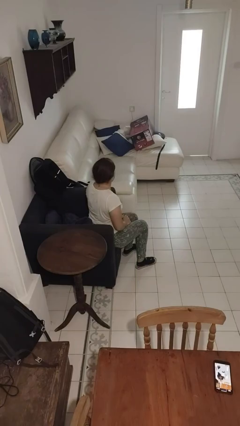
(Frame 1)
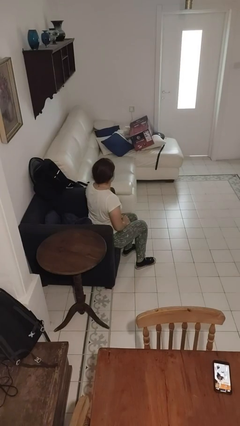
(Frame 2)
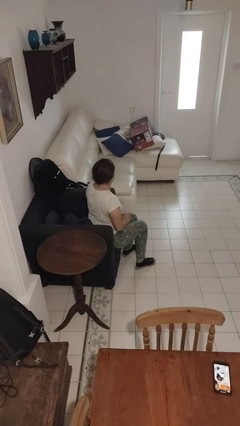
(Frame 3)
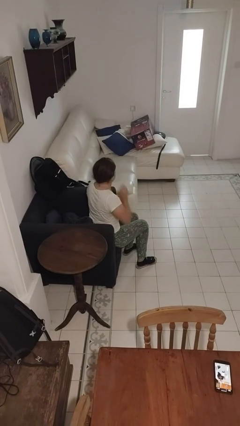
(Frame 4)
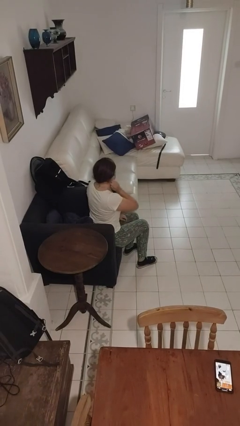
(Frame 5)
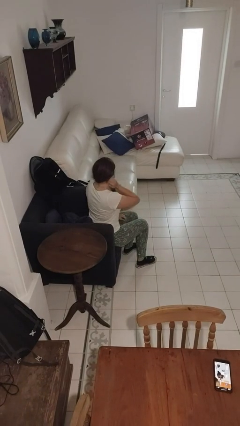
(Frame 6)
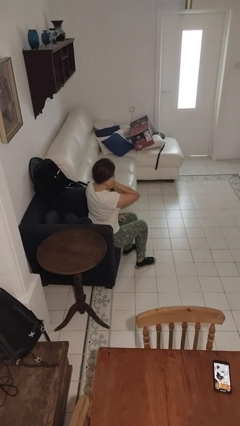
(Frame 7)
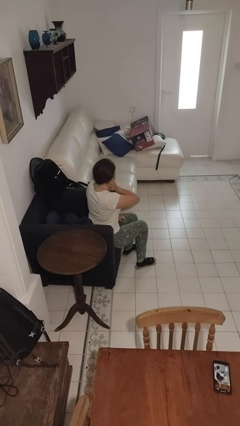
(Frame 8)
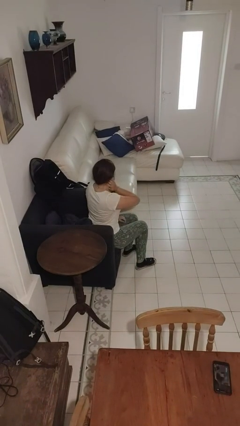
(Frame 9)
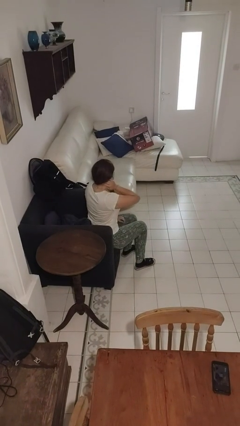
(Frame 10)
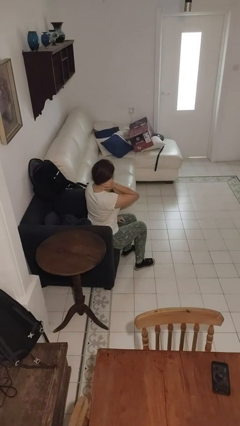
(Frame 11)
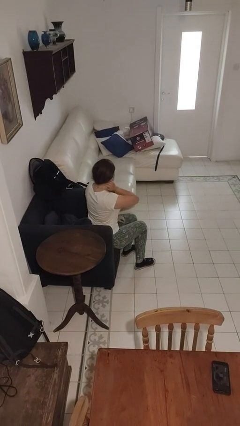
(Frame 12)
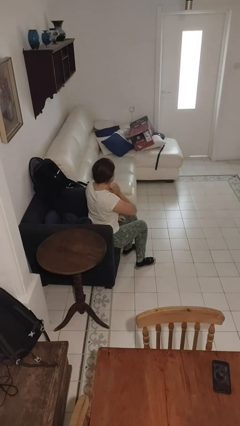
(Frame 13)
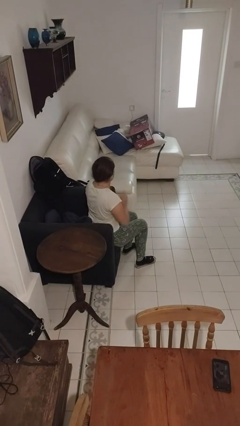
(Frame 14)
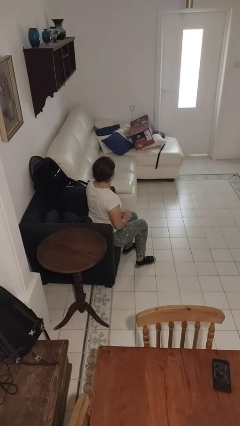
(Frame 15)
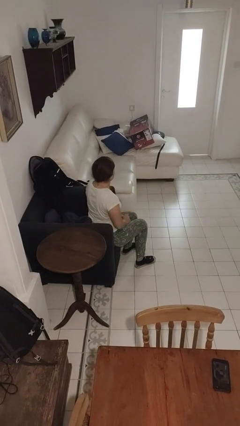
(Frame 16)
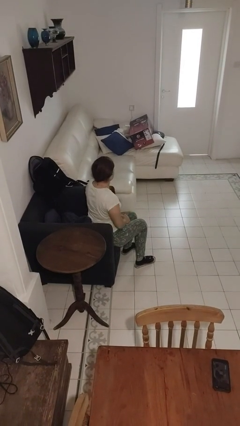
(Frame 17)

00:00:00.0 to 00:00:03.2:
person rubs neck

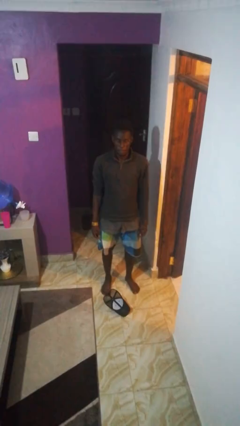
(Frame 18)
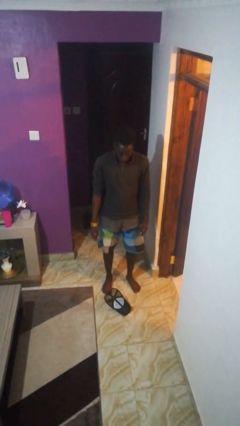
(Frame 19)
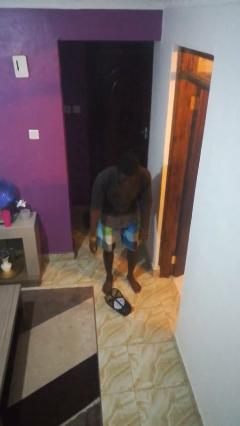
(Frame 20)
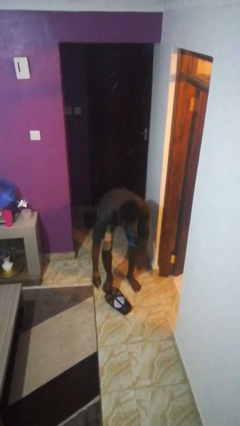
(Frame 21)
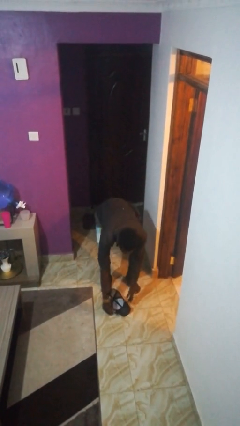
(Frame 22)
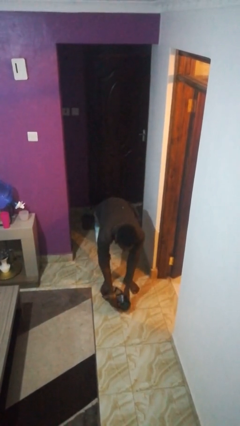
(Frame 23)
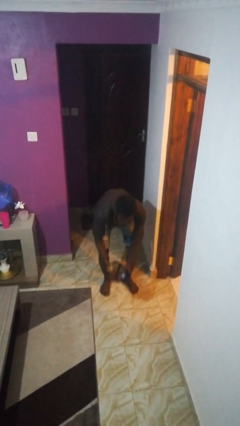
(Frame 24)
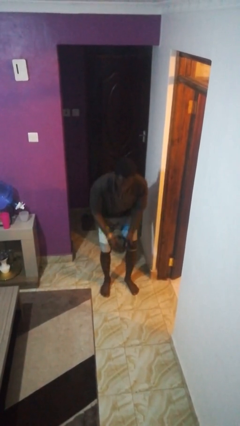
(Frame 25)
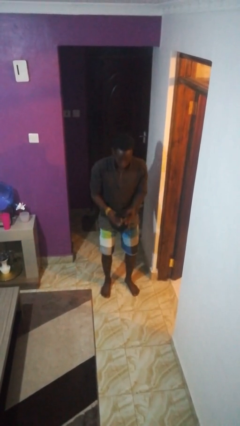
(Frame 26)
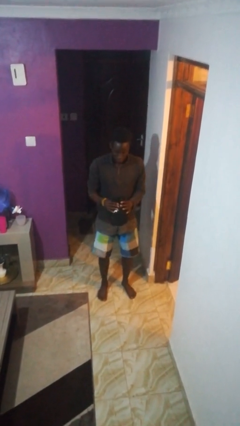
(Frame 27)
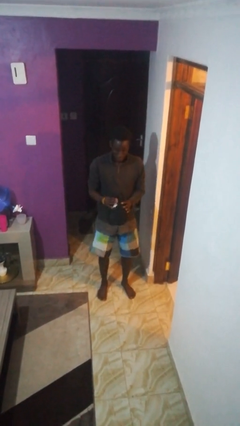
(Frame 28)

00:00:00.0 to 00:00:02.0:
person picks up object from floor

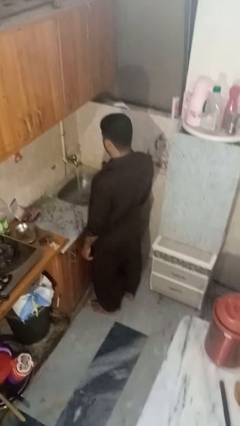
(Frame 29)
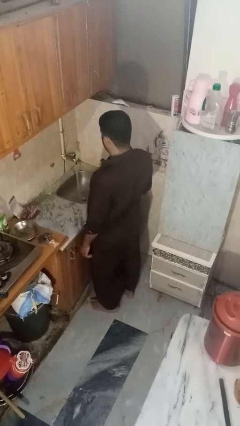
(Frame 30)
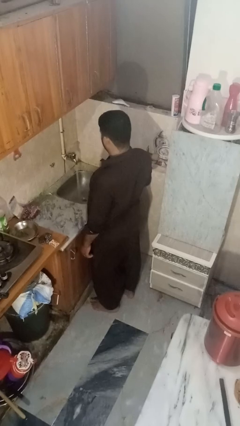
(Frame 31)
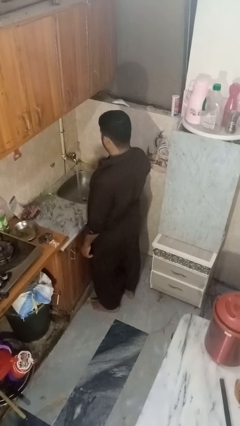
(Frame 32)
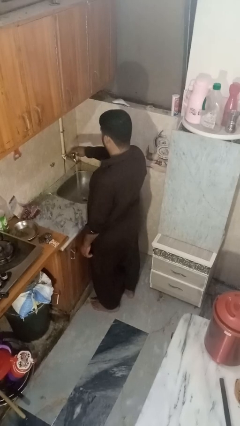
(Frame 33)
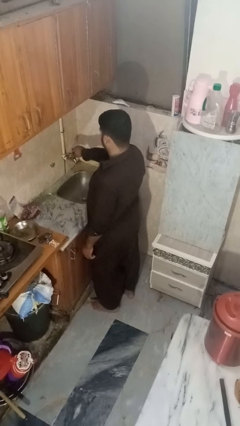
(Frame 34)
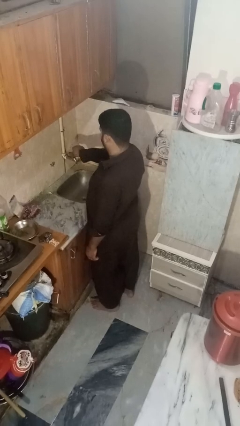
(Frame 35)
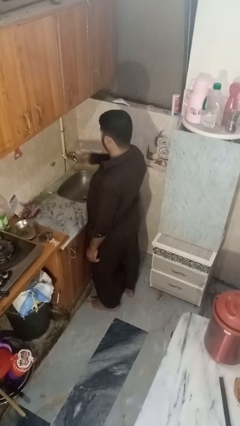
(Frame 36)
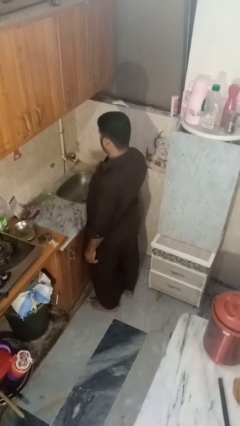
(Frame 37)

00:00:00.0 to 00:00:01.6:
person turns off faucet

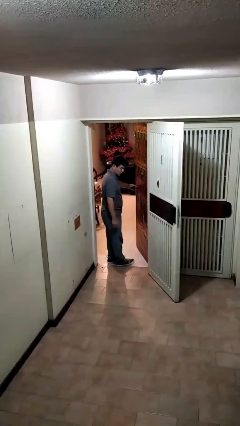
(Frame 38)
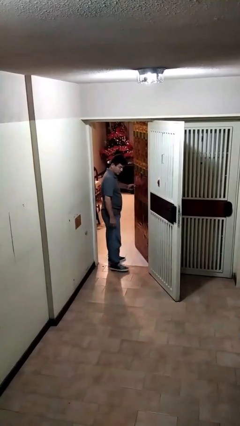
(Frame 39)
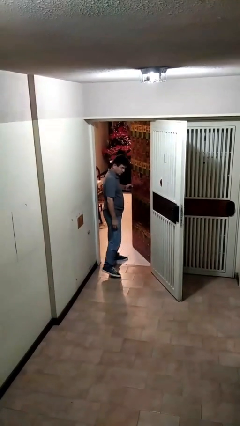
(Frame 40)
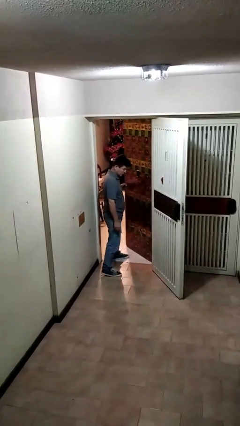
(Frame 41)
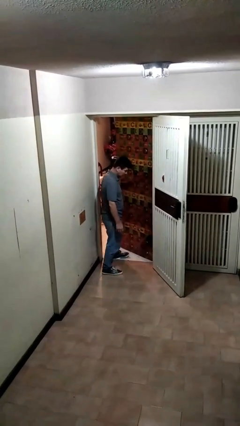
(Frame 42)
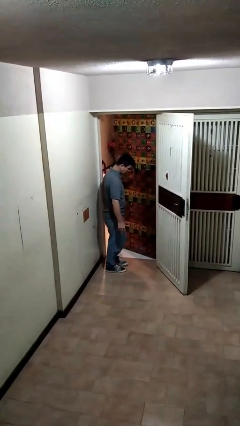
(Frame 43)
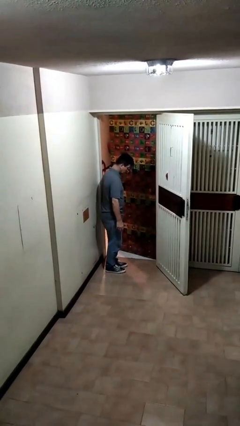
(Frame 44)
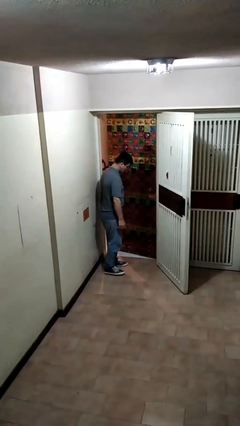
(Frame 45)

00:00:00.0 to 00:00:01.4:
person closes facility door

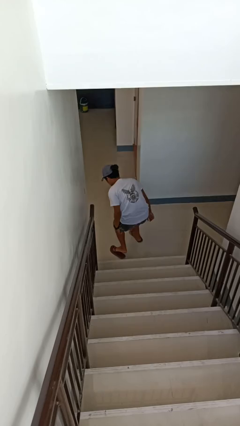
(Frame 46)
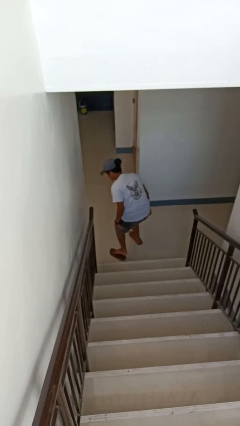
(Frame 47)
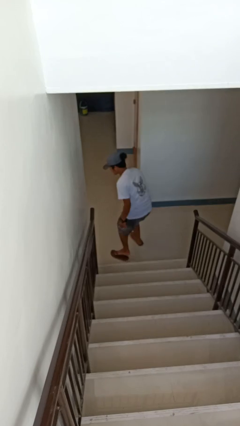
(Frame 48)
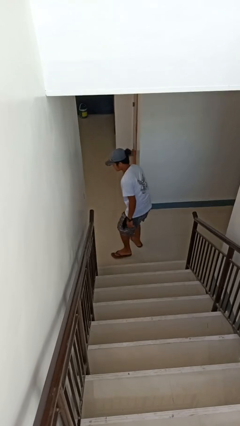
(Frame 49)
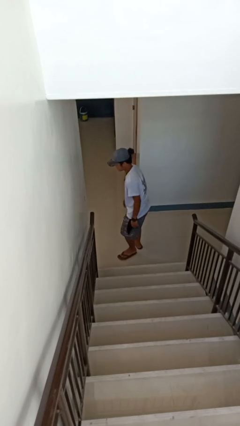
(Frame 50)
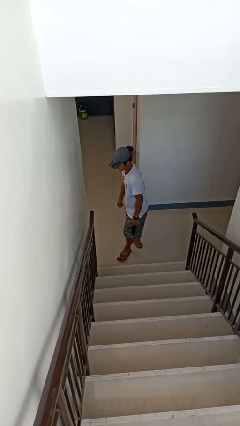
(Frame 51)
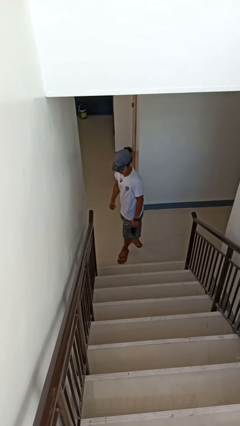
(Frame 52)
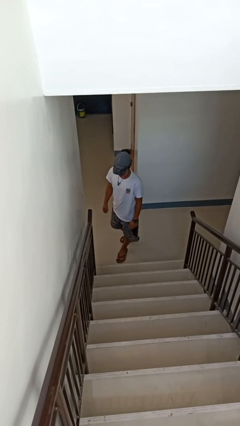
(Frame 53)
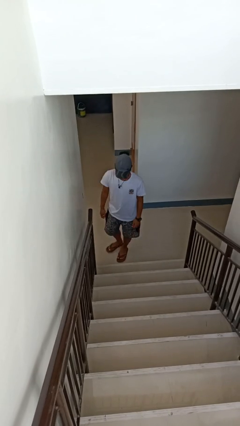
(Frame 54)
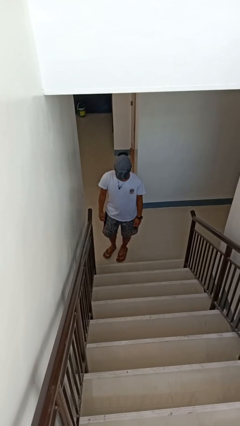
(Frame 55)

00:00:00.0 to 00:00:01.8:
person trips on stair

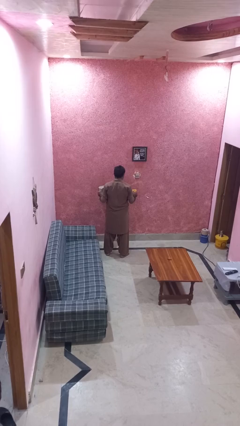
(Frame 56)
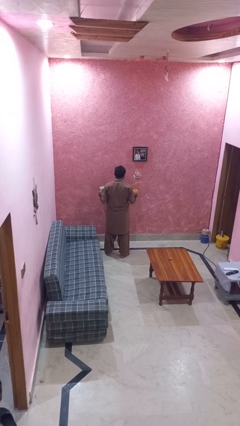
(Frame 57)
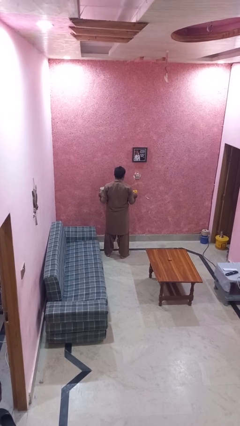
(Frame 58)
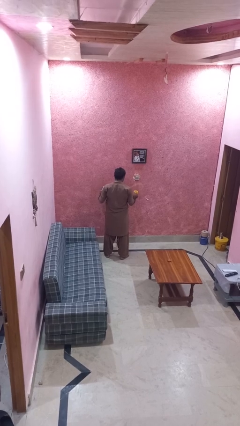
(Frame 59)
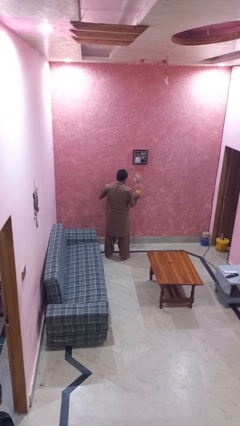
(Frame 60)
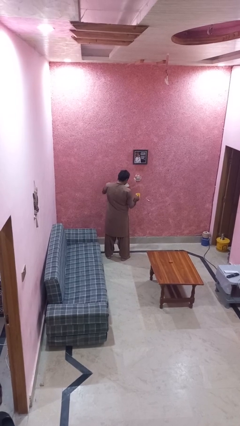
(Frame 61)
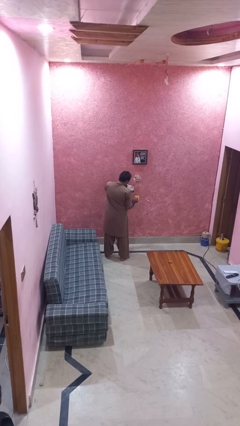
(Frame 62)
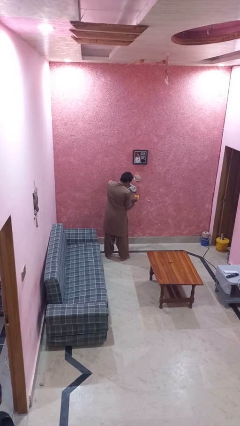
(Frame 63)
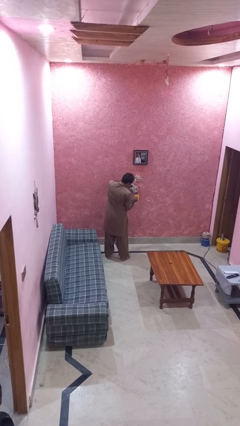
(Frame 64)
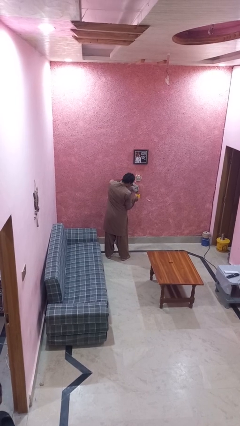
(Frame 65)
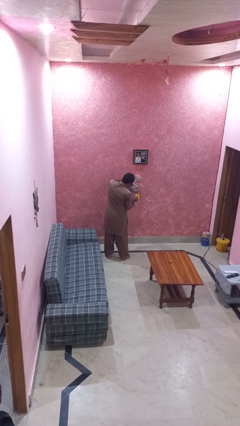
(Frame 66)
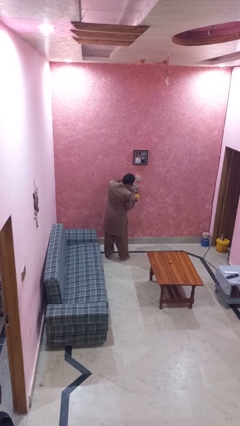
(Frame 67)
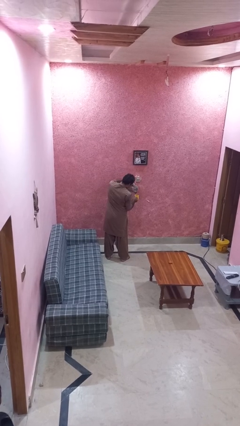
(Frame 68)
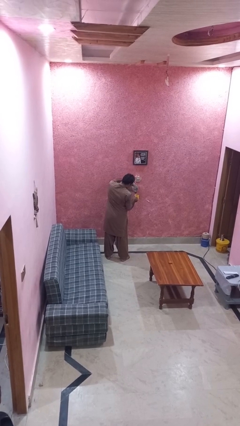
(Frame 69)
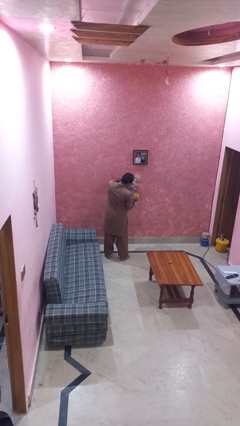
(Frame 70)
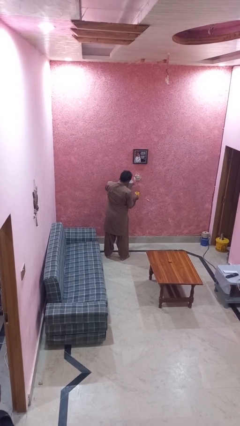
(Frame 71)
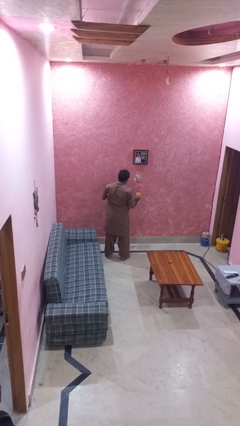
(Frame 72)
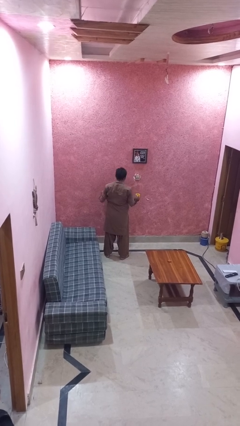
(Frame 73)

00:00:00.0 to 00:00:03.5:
person pours coffee into mug

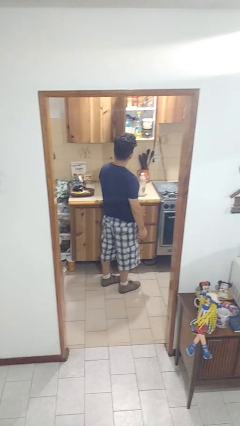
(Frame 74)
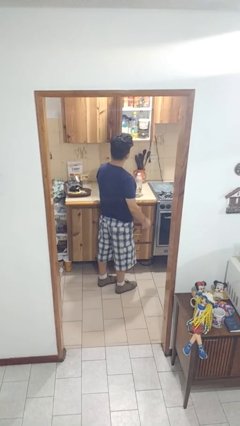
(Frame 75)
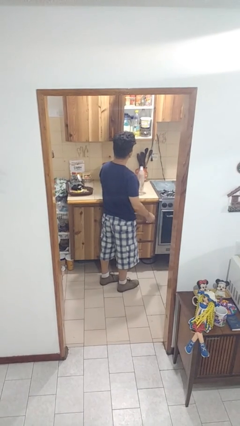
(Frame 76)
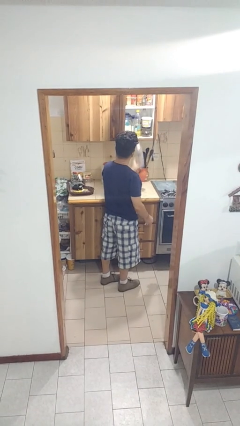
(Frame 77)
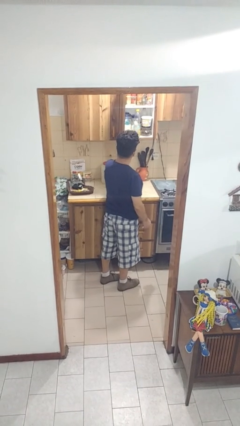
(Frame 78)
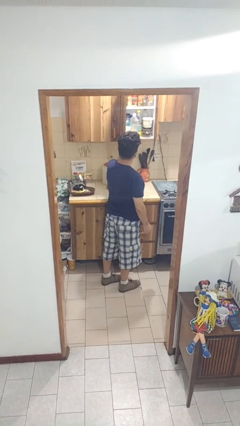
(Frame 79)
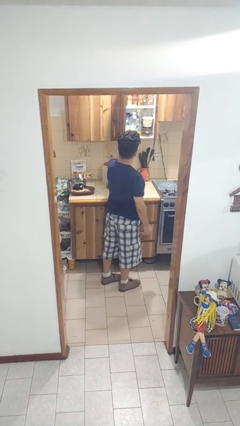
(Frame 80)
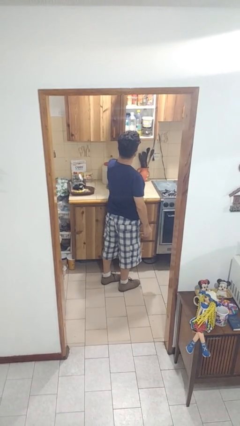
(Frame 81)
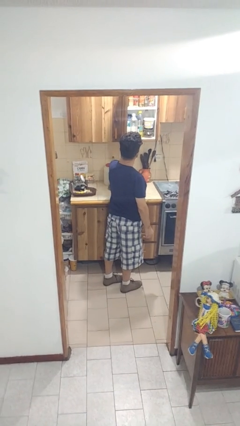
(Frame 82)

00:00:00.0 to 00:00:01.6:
person puts object in cabinet

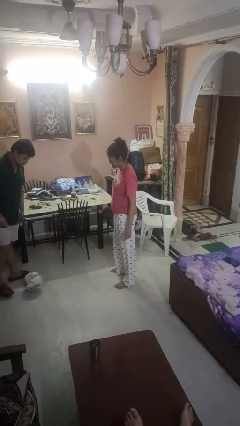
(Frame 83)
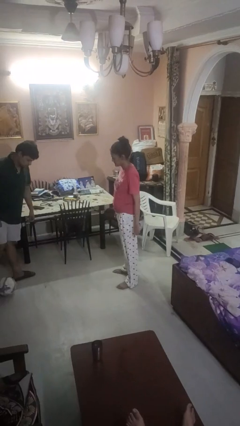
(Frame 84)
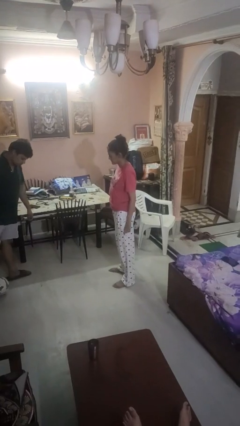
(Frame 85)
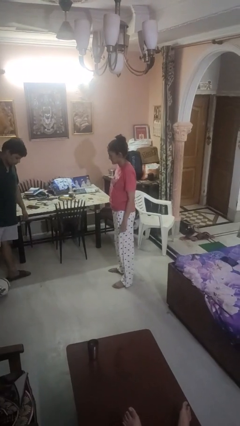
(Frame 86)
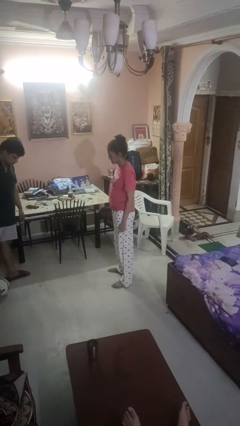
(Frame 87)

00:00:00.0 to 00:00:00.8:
person kicks object to person

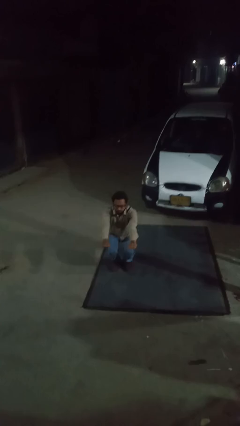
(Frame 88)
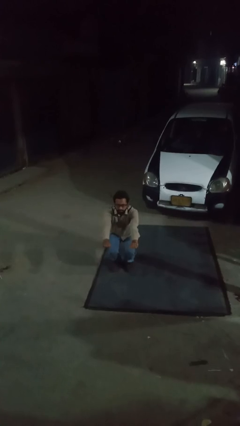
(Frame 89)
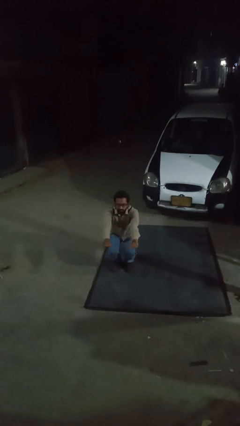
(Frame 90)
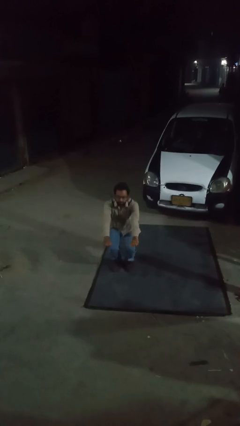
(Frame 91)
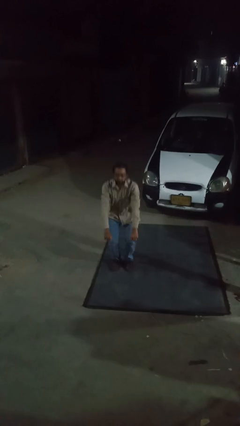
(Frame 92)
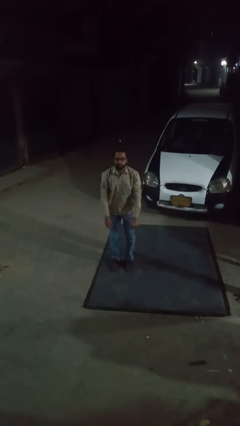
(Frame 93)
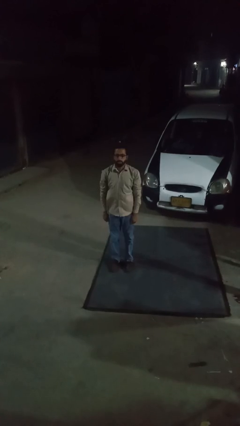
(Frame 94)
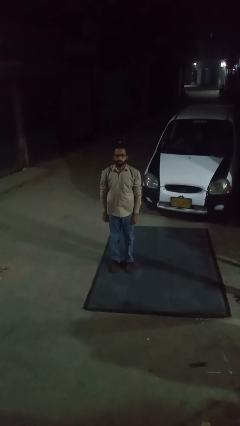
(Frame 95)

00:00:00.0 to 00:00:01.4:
person stands up
